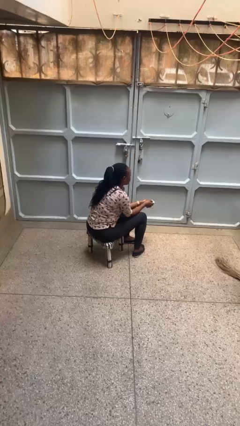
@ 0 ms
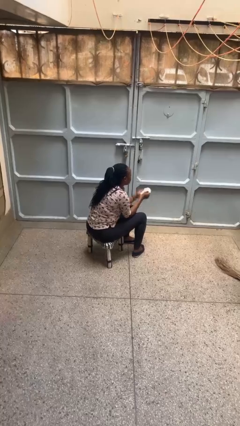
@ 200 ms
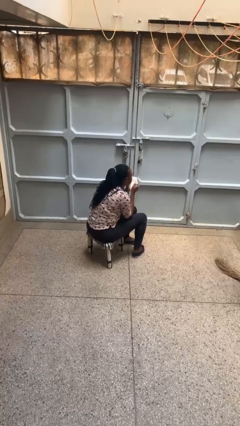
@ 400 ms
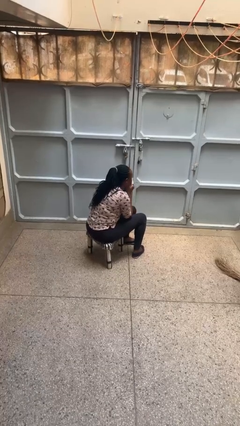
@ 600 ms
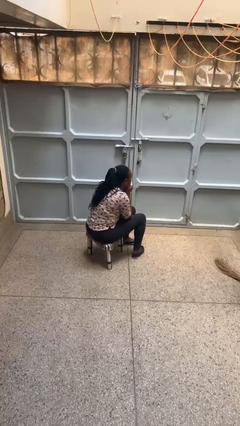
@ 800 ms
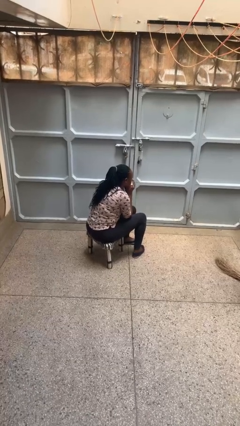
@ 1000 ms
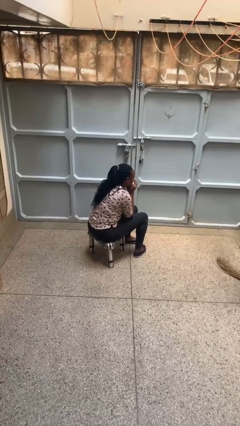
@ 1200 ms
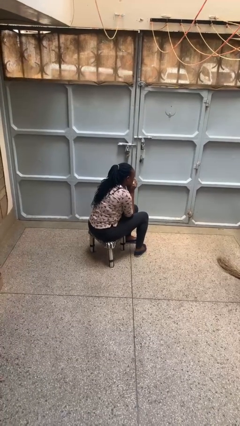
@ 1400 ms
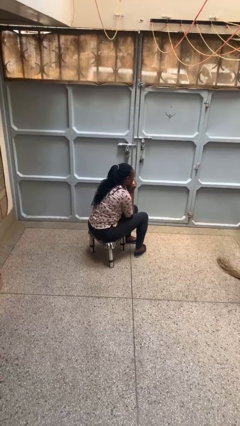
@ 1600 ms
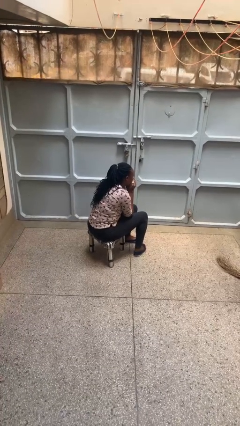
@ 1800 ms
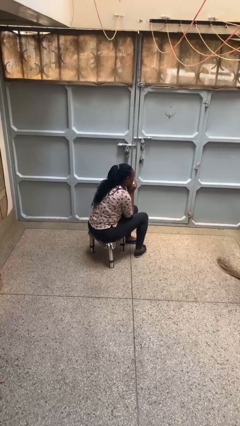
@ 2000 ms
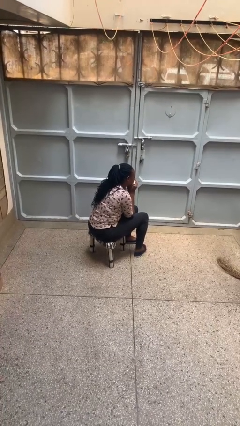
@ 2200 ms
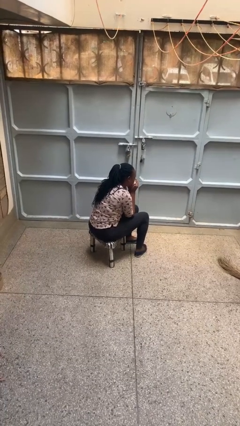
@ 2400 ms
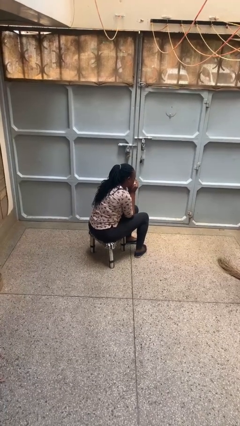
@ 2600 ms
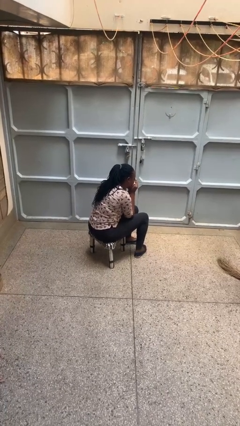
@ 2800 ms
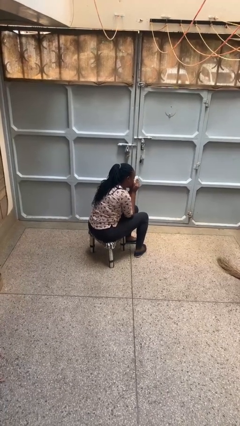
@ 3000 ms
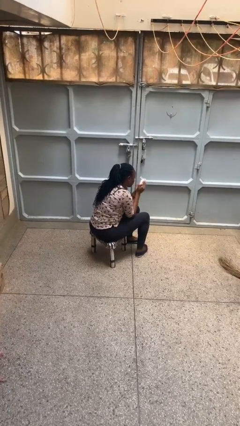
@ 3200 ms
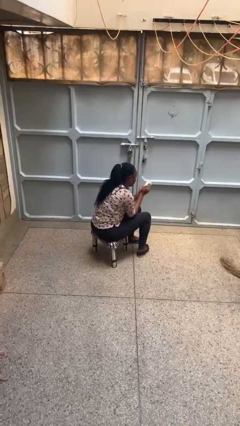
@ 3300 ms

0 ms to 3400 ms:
person blows nose

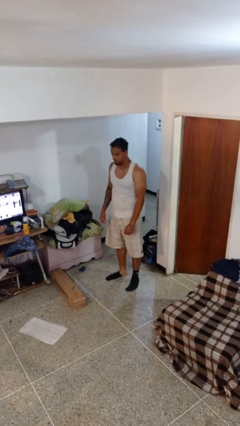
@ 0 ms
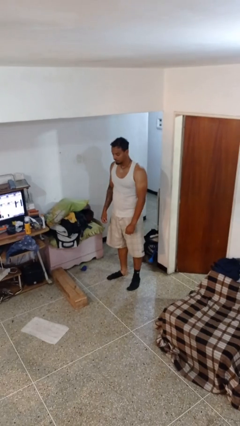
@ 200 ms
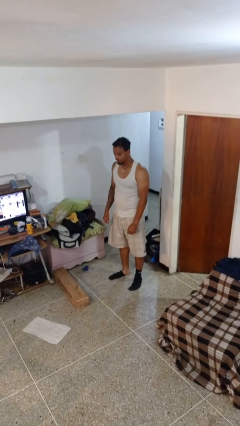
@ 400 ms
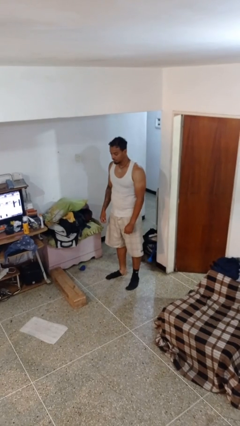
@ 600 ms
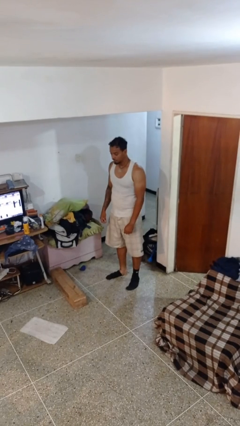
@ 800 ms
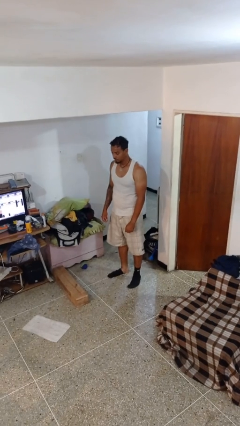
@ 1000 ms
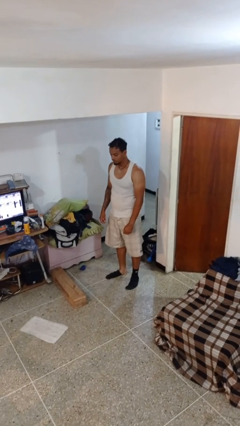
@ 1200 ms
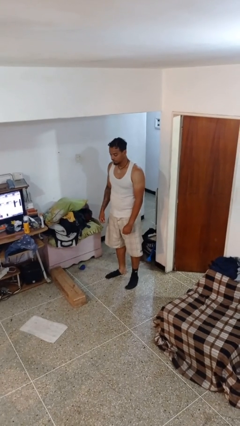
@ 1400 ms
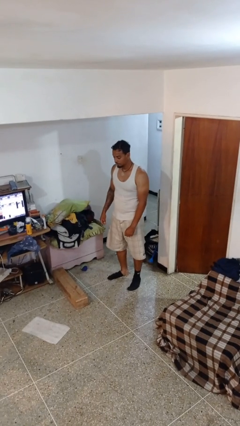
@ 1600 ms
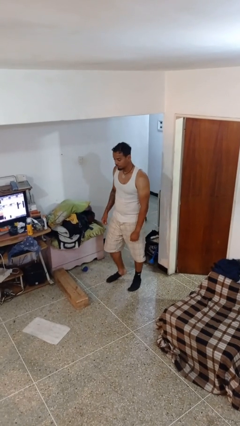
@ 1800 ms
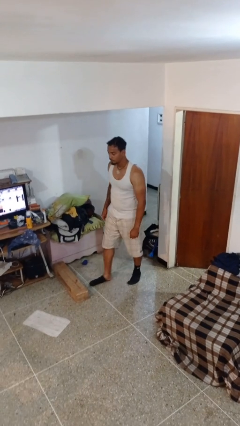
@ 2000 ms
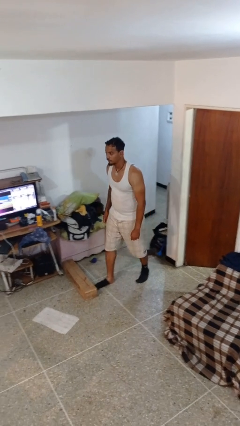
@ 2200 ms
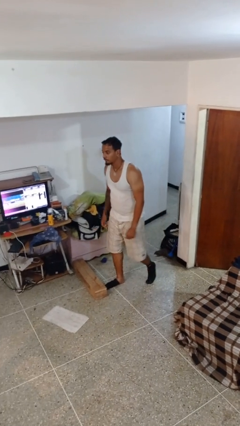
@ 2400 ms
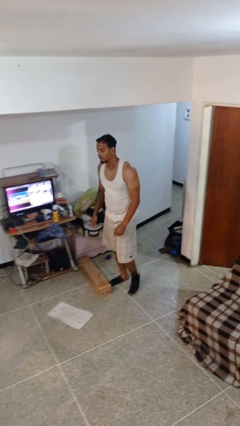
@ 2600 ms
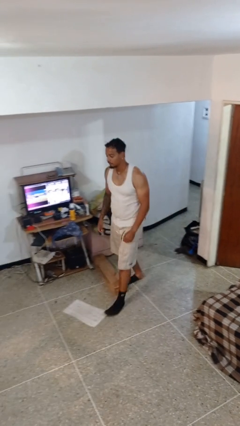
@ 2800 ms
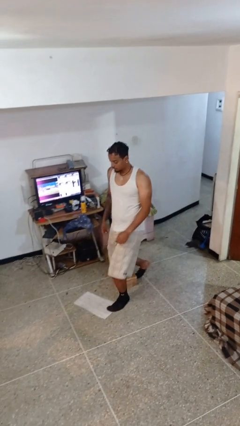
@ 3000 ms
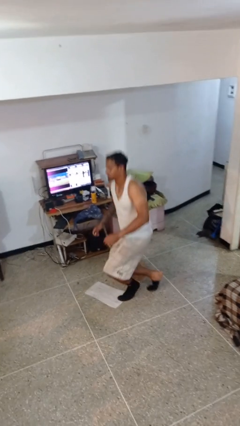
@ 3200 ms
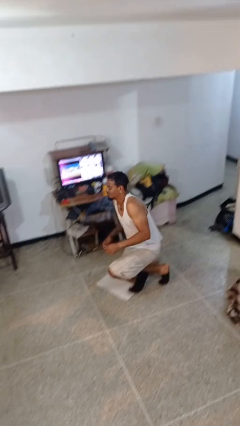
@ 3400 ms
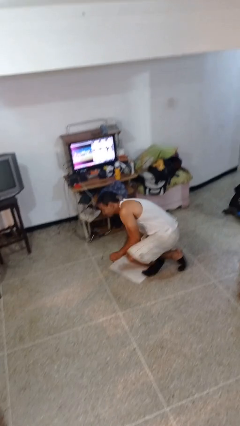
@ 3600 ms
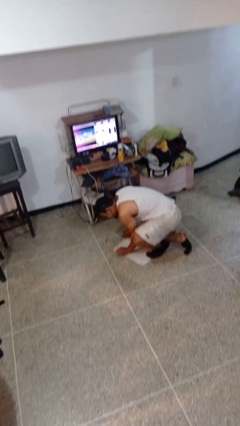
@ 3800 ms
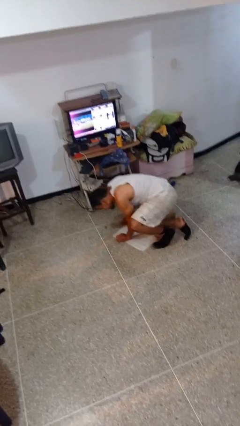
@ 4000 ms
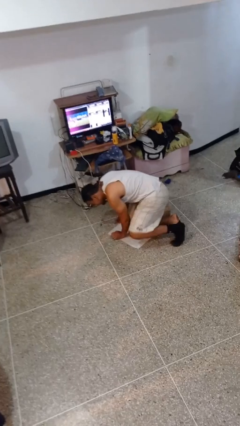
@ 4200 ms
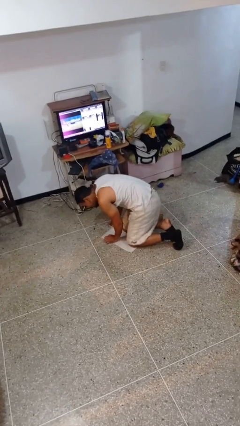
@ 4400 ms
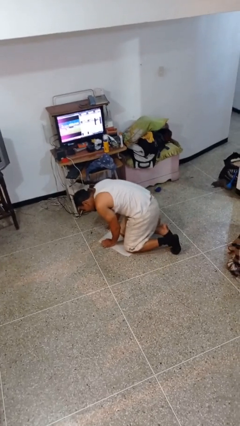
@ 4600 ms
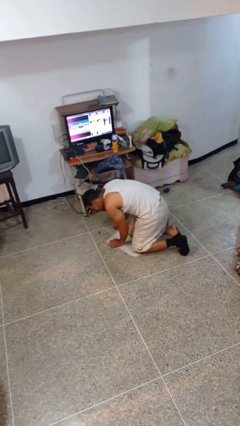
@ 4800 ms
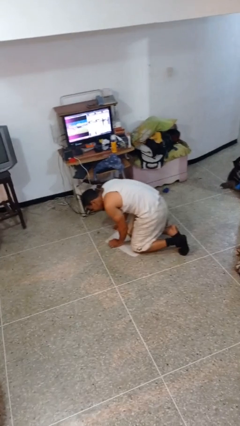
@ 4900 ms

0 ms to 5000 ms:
person trips on object on floor

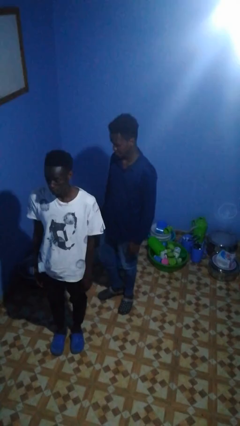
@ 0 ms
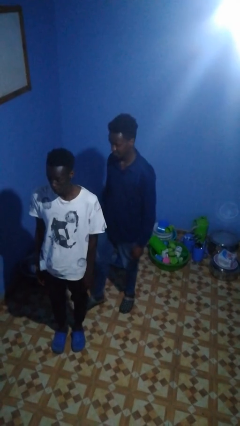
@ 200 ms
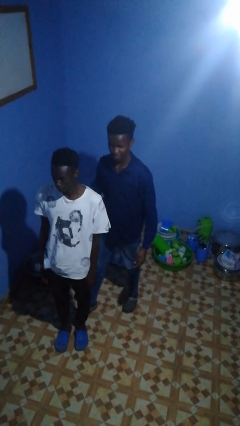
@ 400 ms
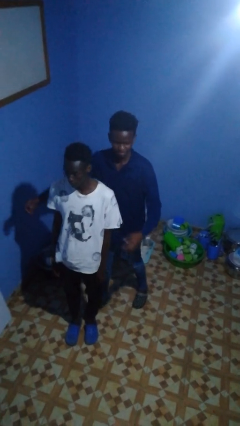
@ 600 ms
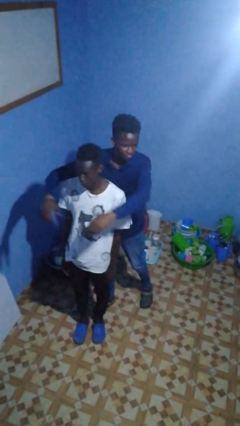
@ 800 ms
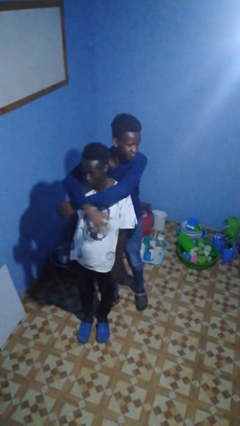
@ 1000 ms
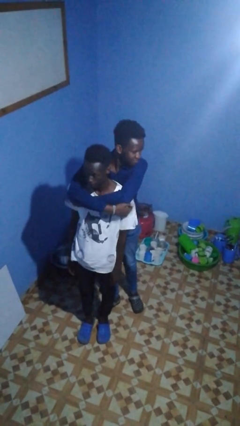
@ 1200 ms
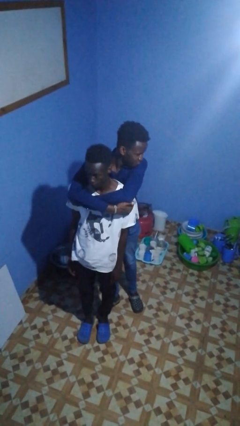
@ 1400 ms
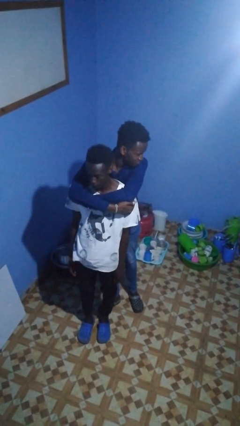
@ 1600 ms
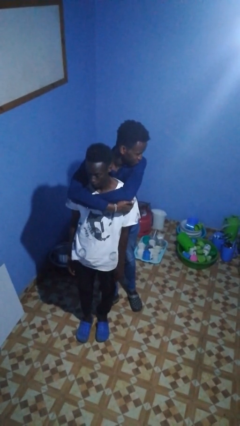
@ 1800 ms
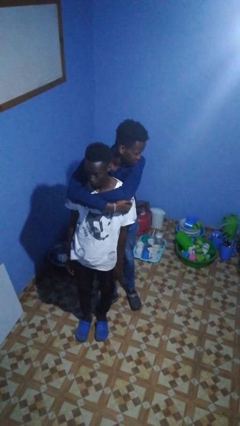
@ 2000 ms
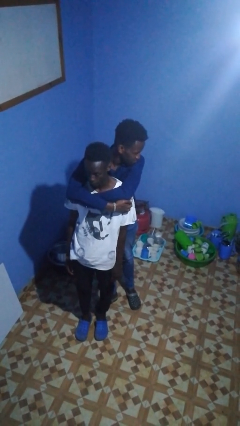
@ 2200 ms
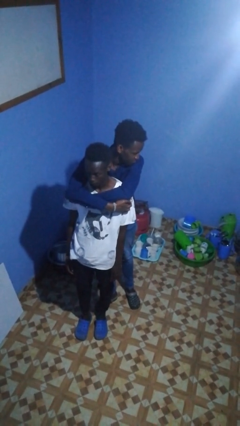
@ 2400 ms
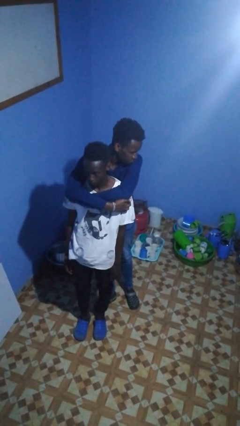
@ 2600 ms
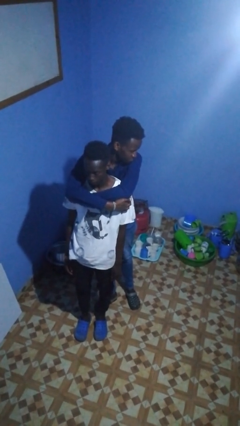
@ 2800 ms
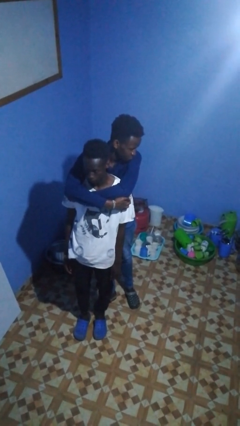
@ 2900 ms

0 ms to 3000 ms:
person hugs person from behind

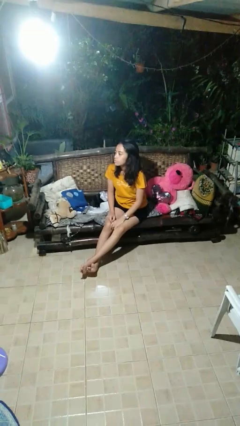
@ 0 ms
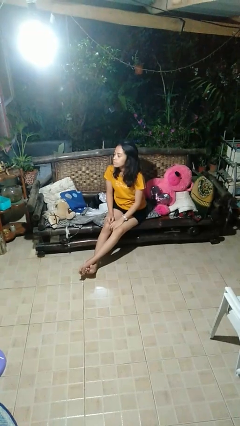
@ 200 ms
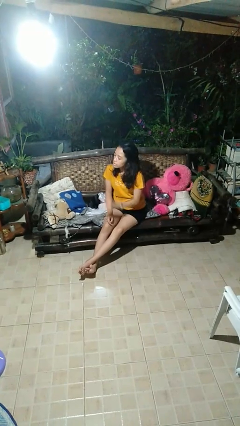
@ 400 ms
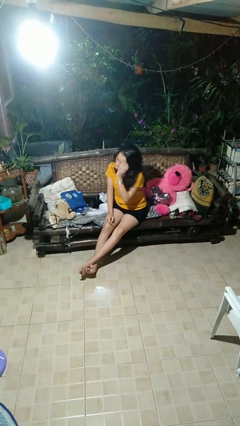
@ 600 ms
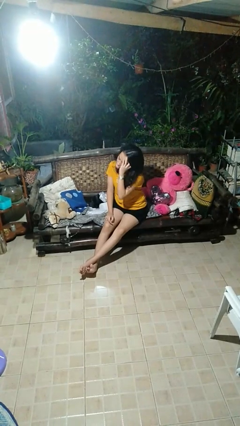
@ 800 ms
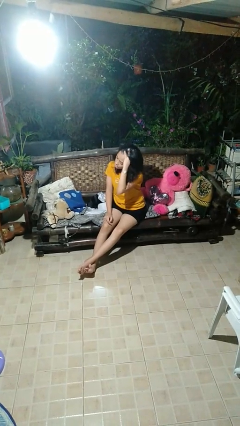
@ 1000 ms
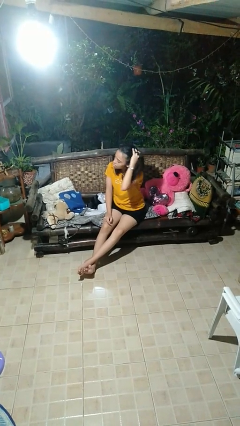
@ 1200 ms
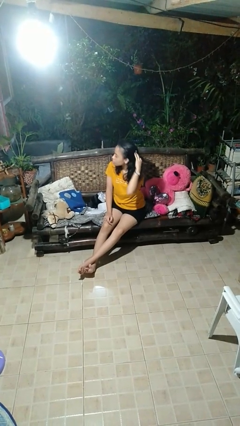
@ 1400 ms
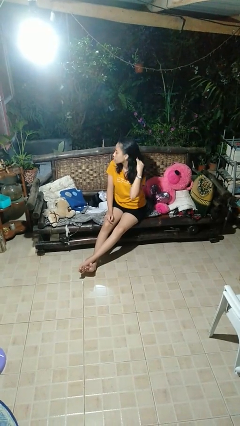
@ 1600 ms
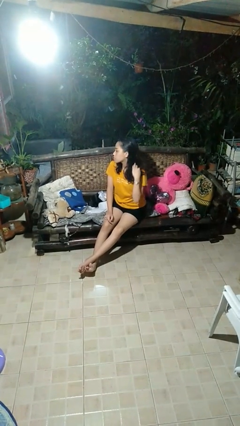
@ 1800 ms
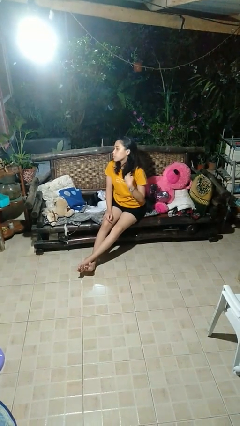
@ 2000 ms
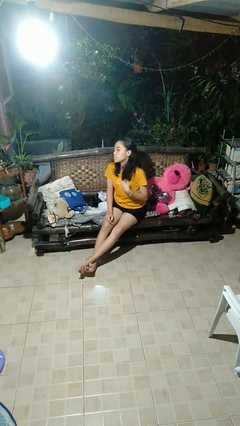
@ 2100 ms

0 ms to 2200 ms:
person strokes hair

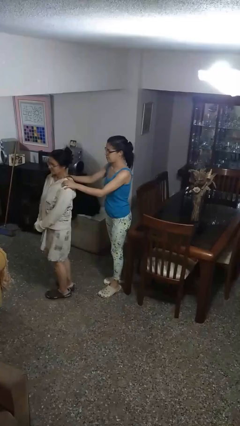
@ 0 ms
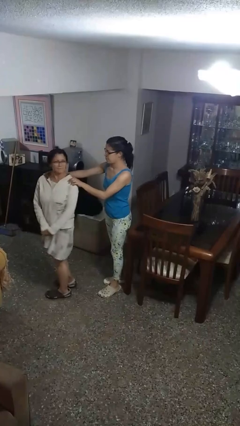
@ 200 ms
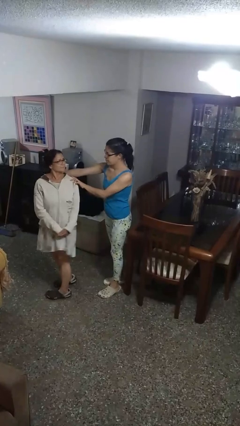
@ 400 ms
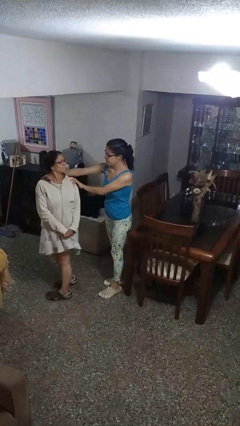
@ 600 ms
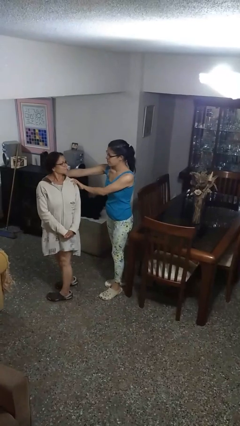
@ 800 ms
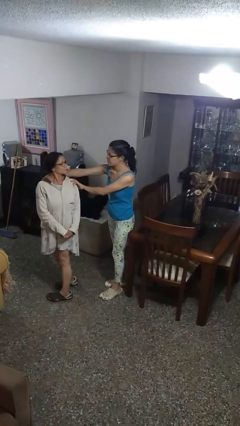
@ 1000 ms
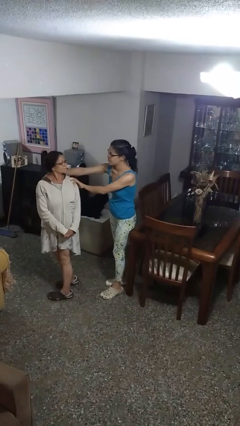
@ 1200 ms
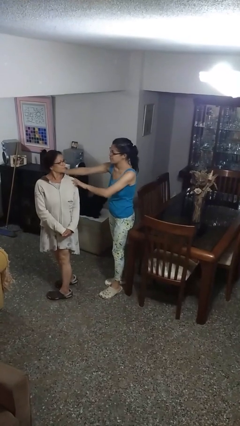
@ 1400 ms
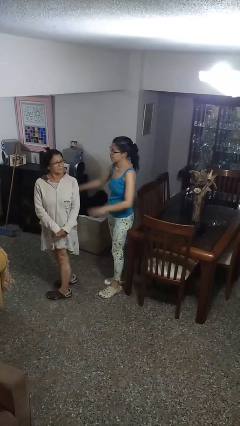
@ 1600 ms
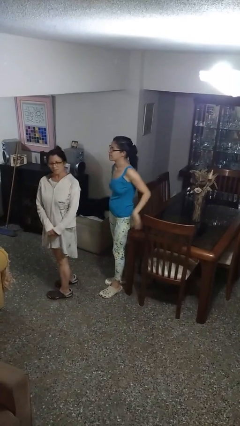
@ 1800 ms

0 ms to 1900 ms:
person spins person around

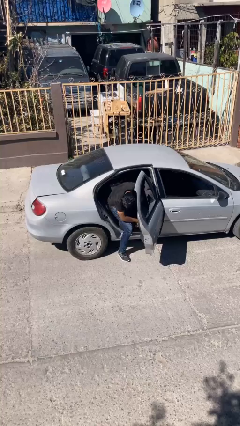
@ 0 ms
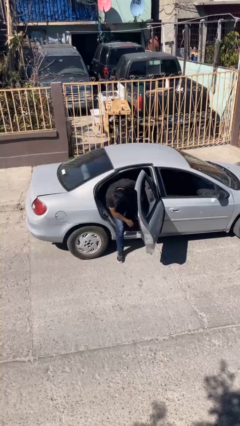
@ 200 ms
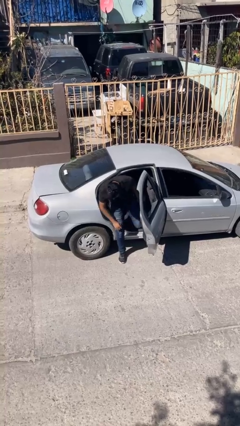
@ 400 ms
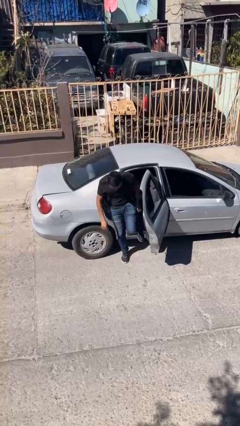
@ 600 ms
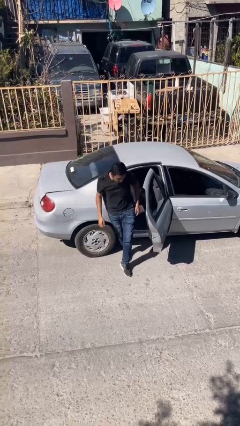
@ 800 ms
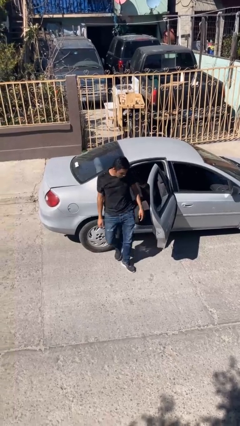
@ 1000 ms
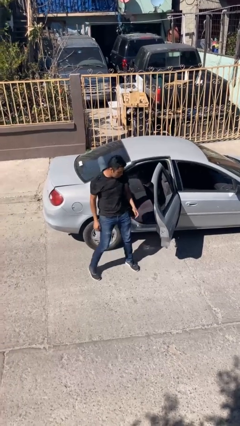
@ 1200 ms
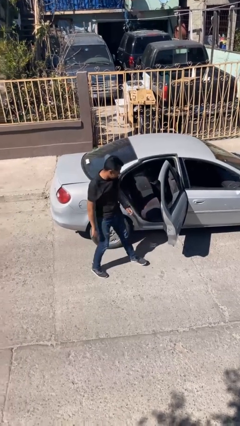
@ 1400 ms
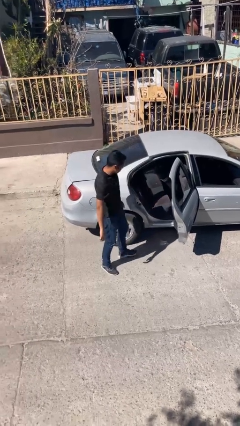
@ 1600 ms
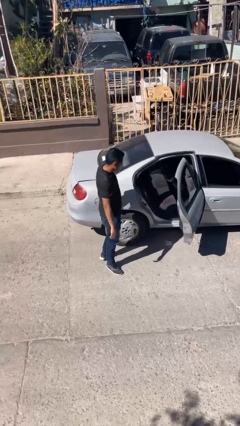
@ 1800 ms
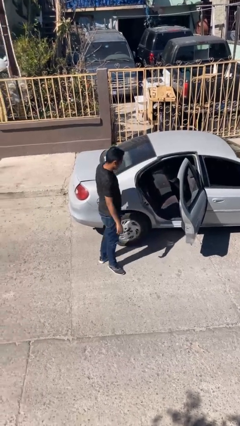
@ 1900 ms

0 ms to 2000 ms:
person exits car
